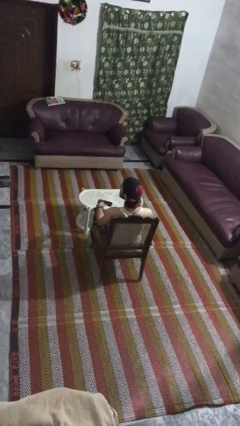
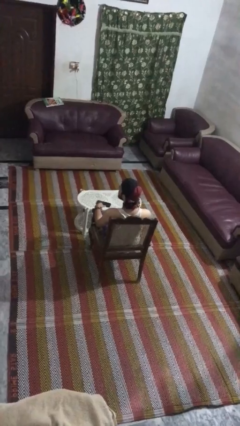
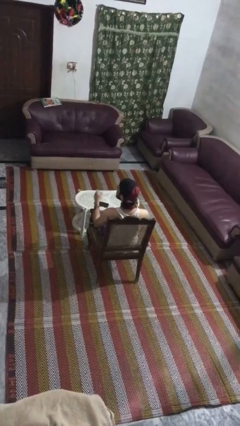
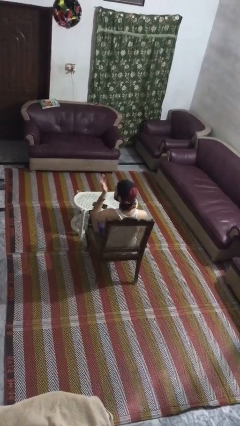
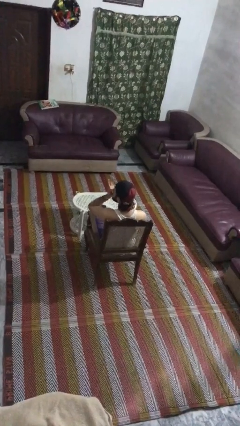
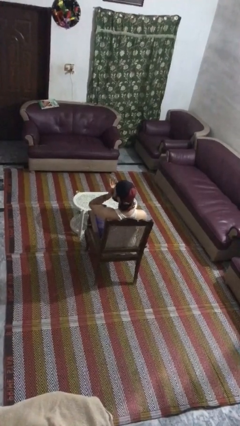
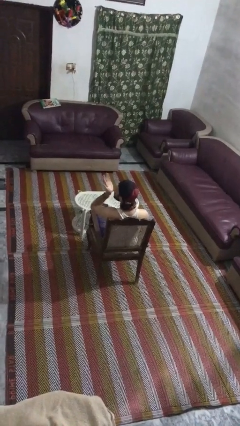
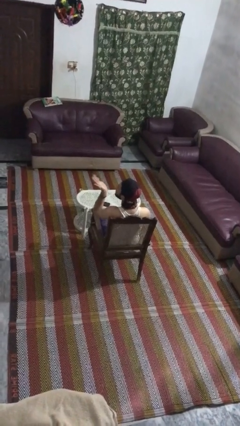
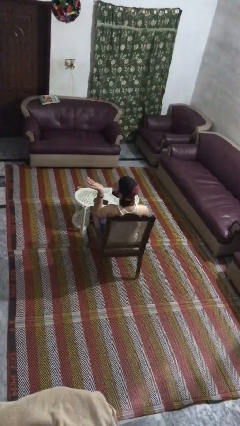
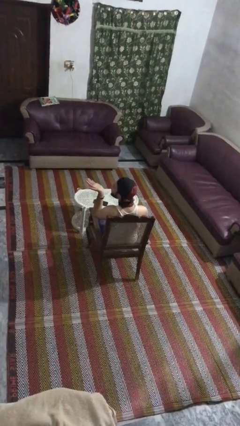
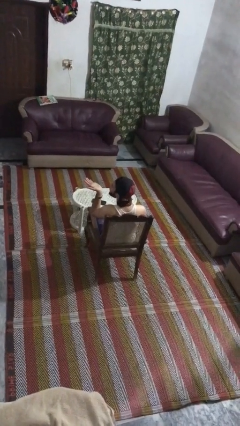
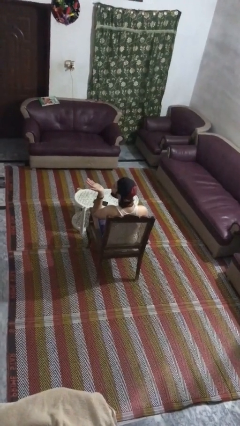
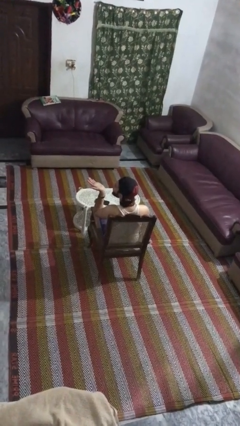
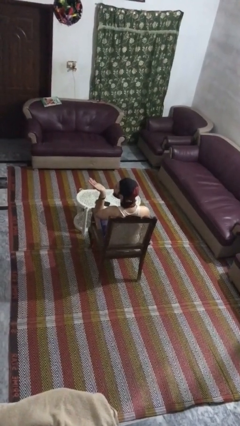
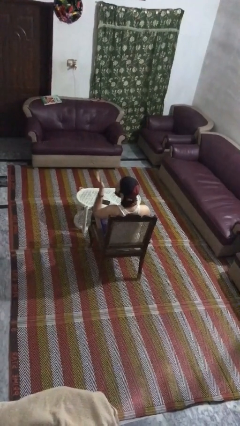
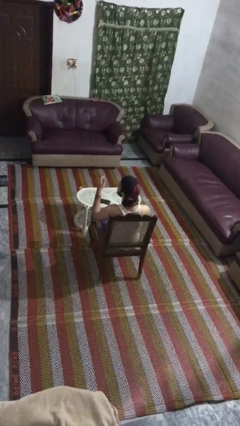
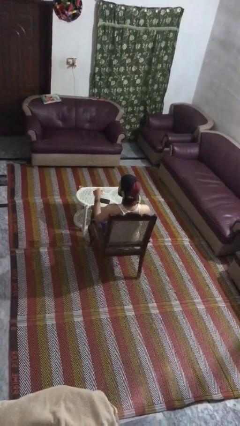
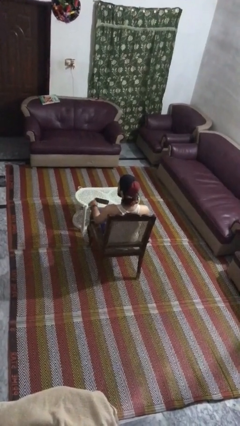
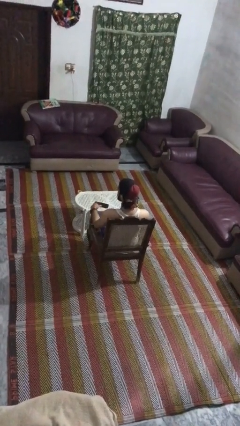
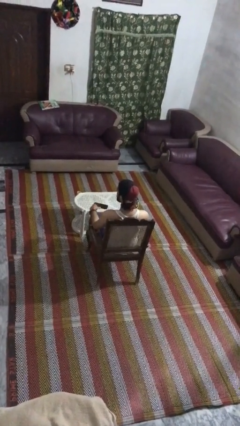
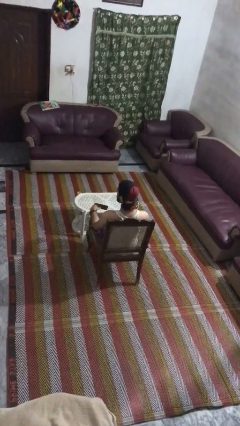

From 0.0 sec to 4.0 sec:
person gestures blow kiss

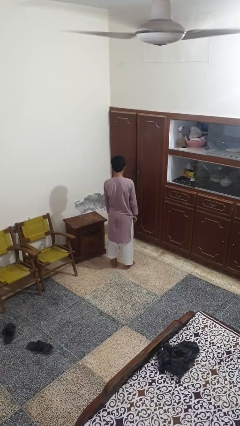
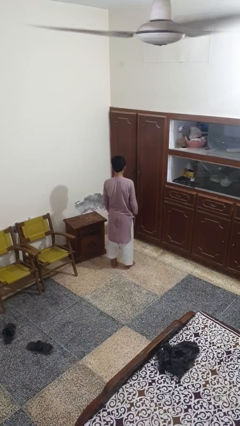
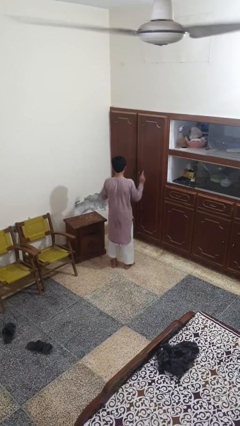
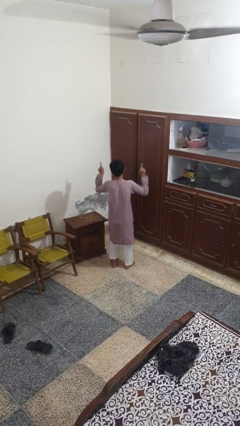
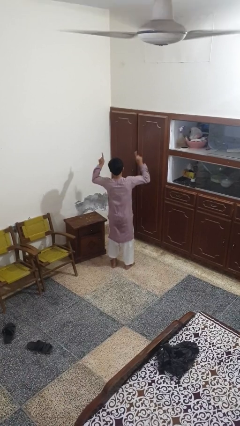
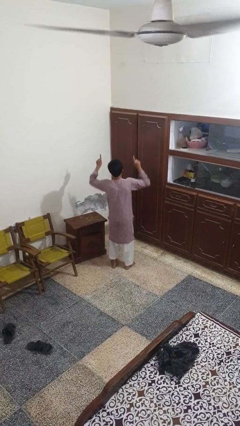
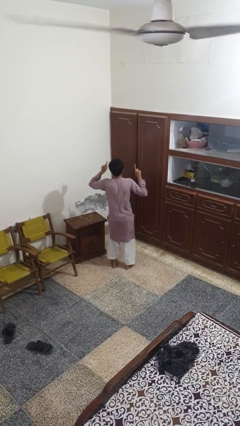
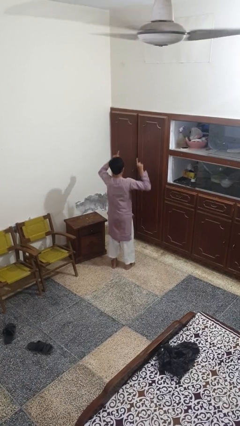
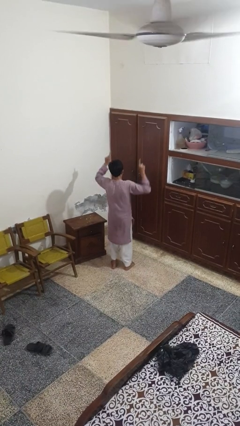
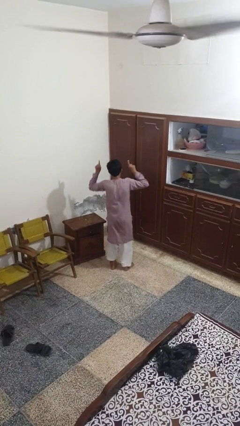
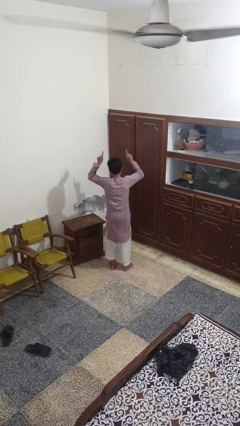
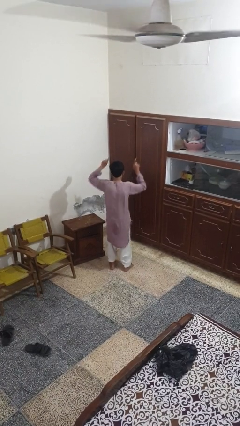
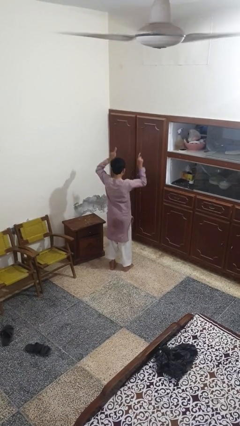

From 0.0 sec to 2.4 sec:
person dances in place

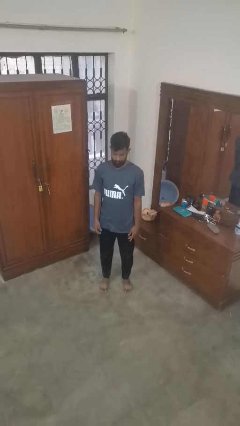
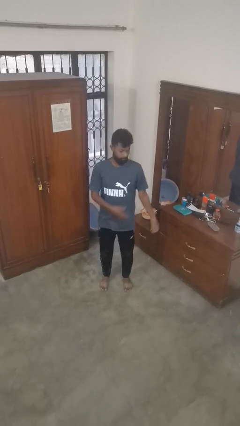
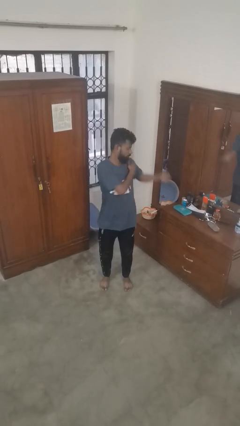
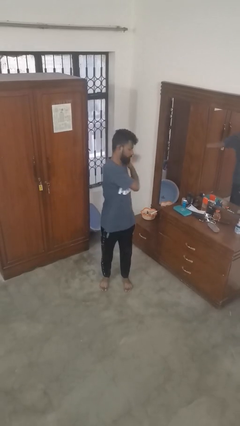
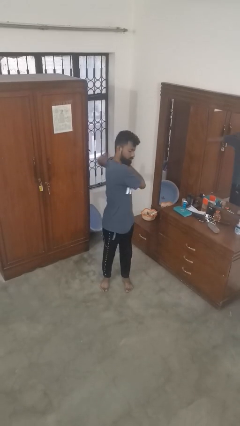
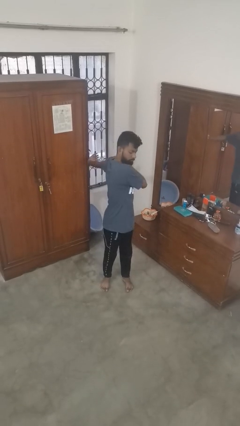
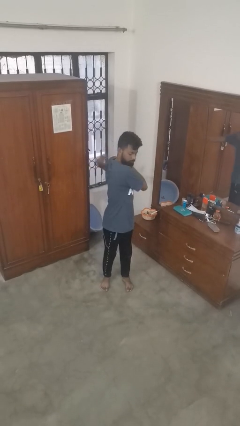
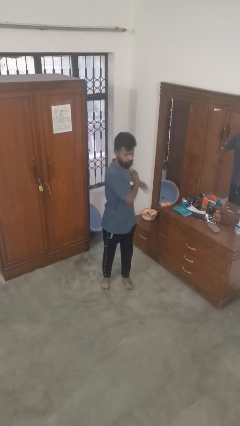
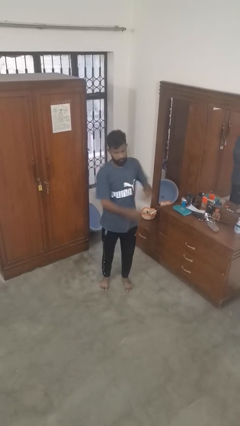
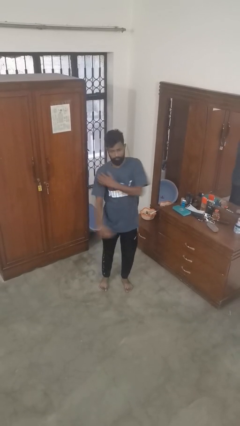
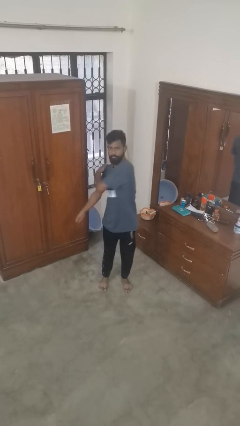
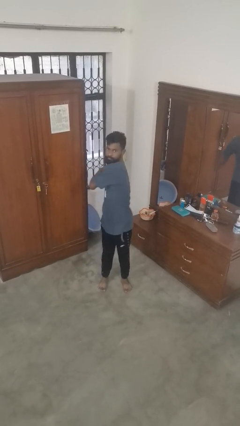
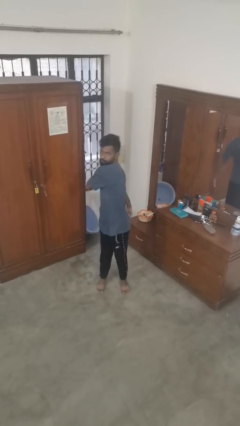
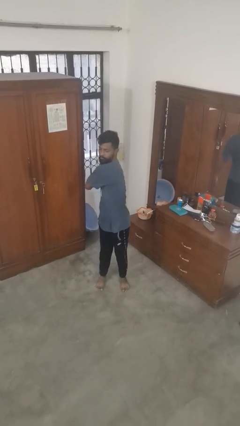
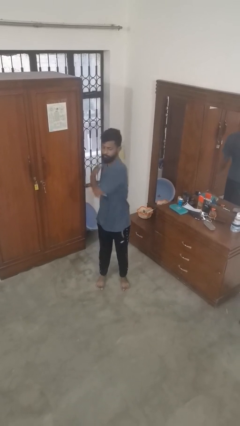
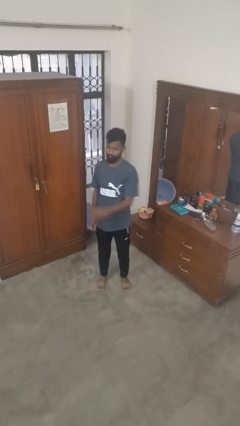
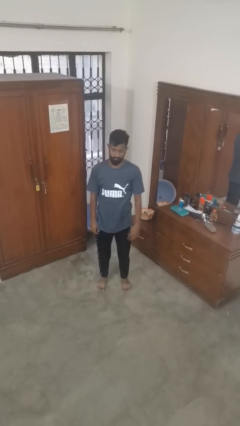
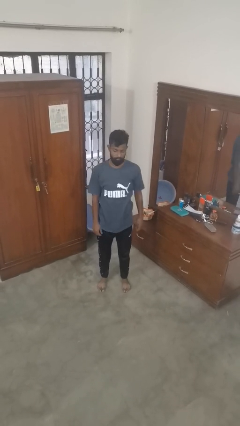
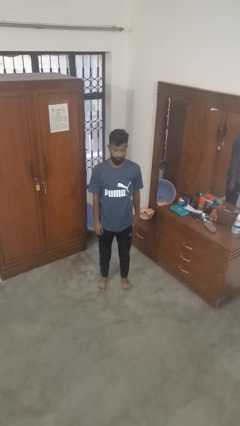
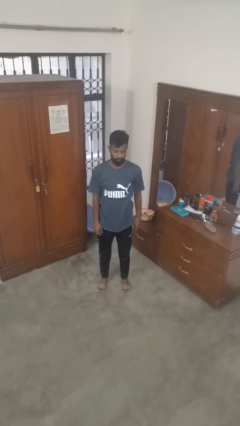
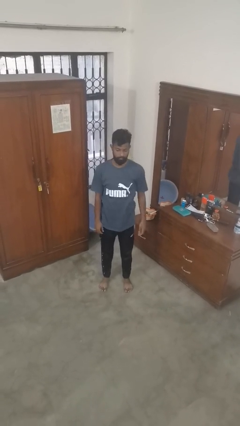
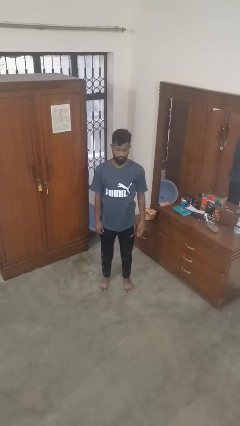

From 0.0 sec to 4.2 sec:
person stretches arms to side

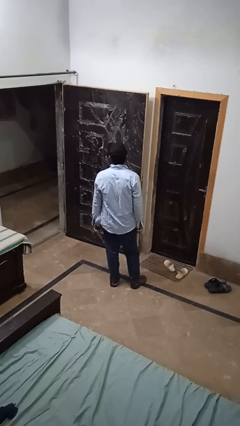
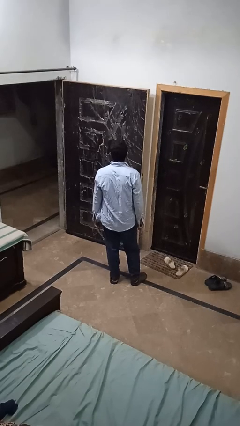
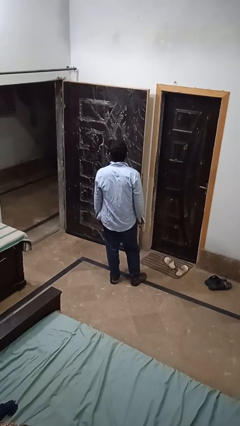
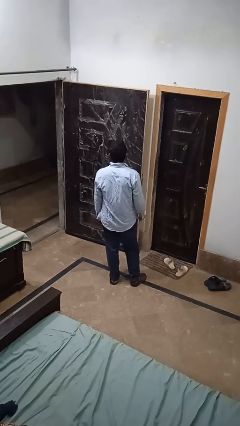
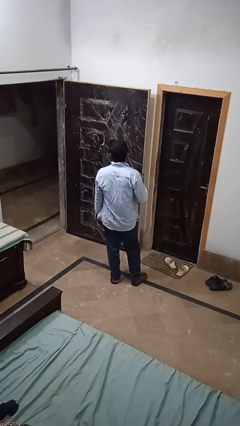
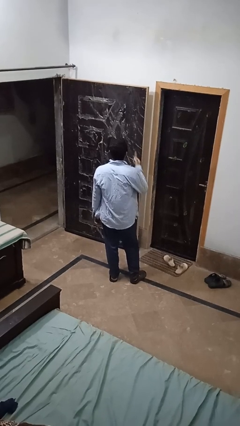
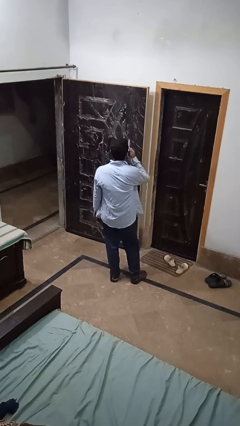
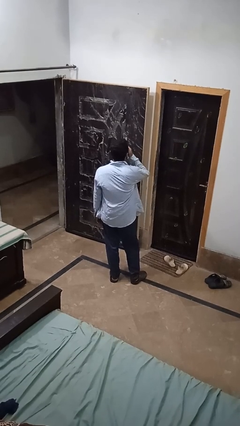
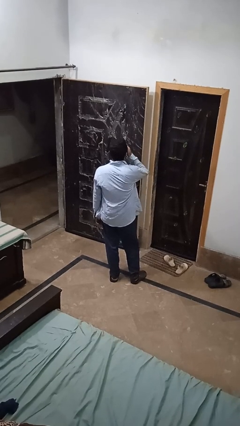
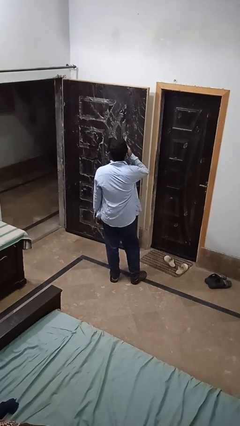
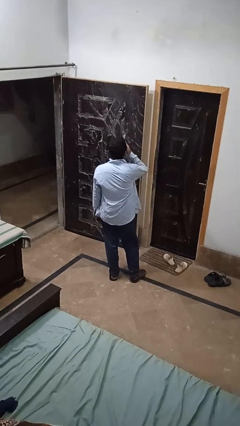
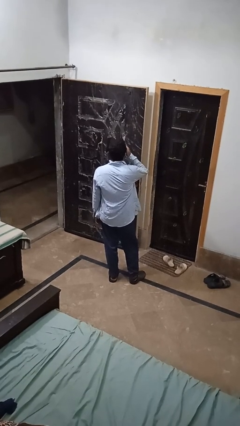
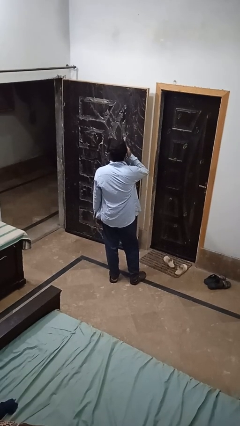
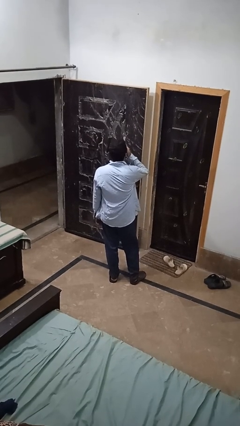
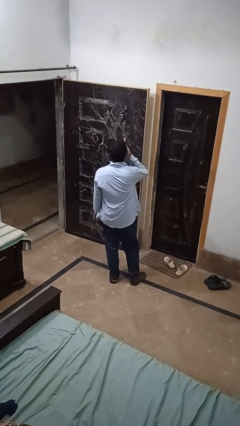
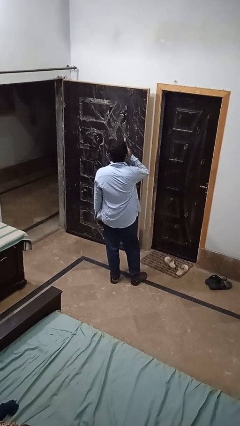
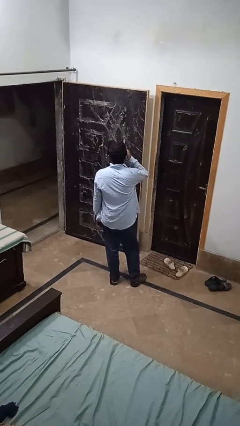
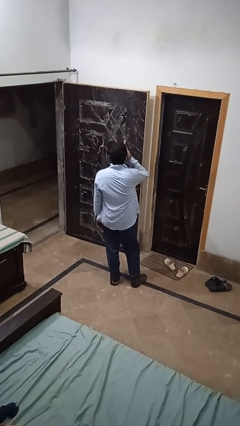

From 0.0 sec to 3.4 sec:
person vapes

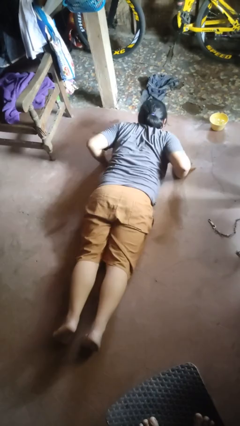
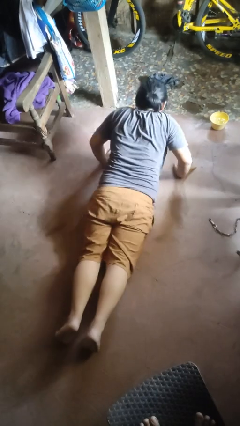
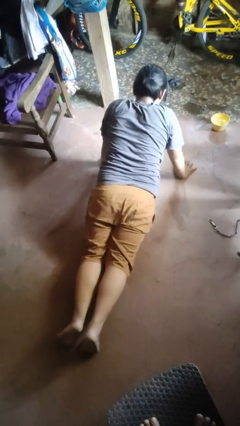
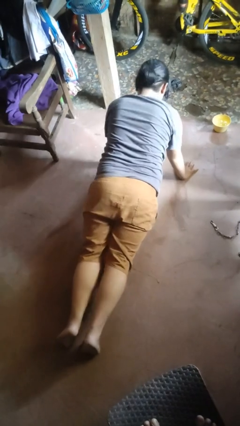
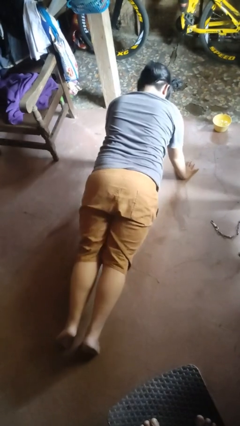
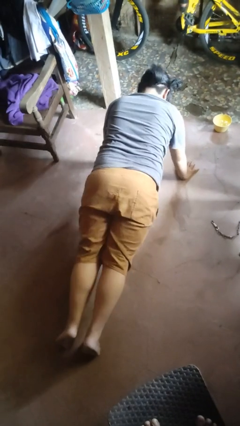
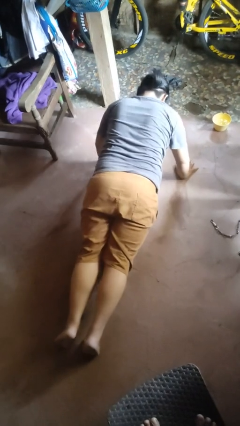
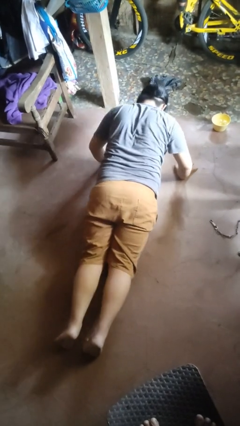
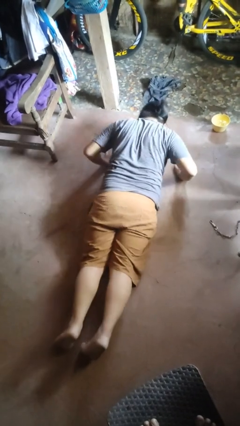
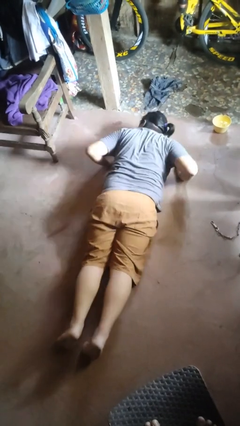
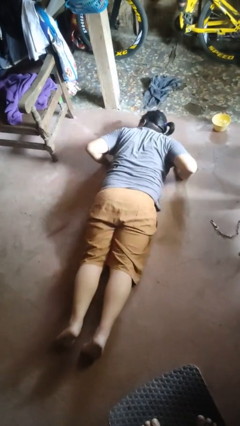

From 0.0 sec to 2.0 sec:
person exercises with pushup

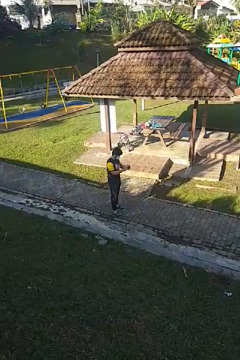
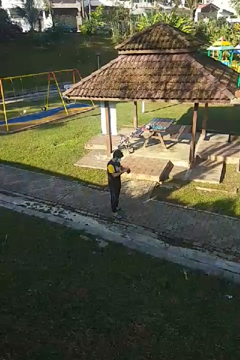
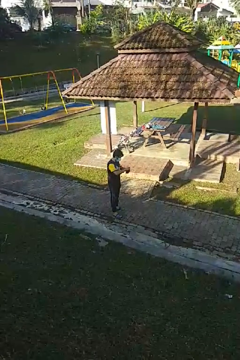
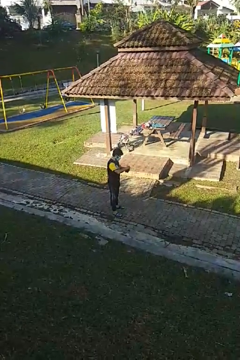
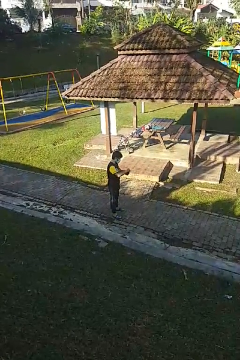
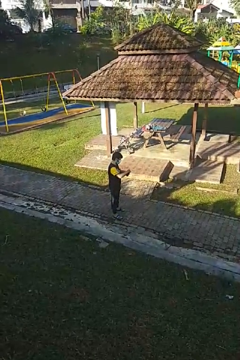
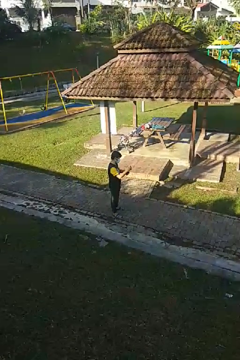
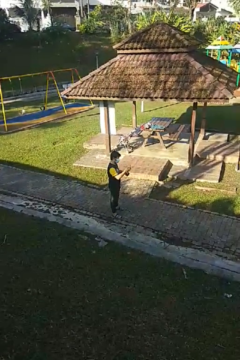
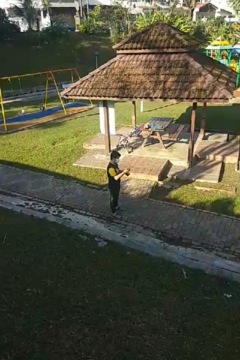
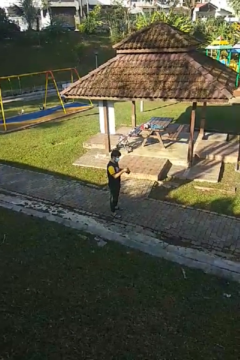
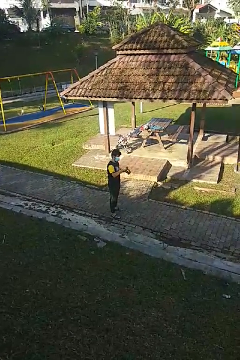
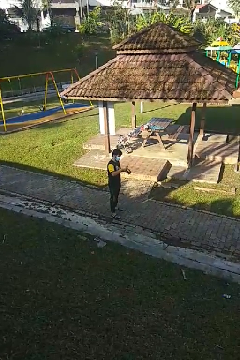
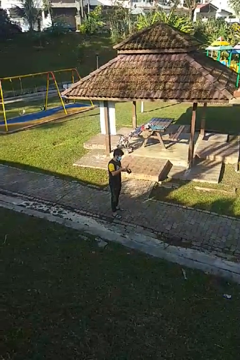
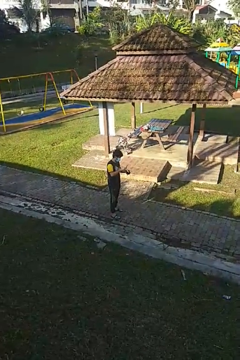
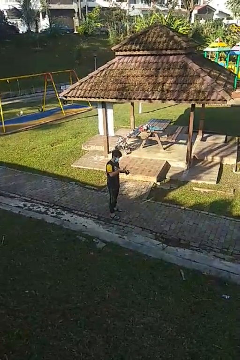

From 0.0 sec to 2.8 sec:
person takes object from purse
